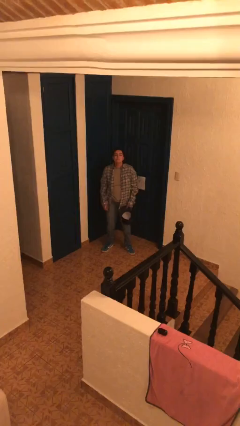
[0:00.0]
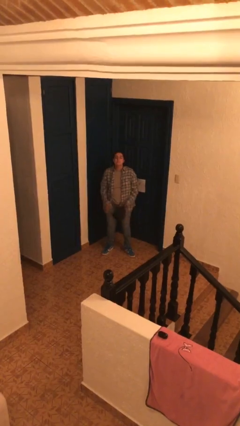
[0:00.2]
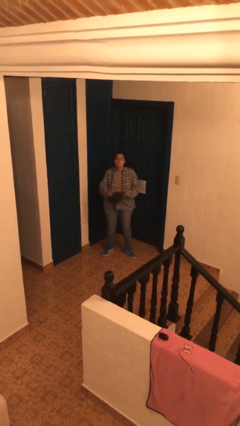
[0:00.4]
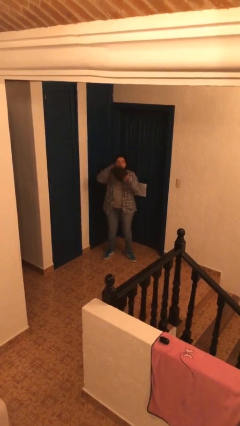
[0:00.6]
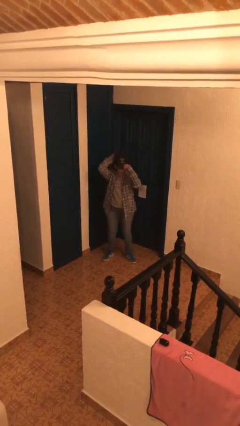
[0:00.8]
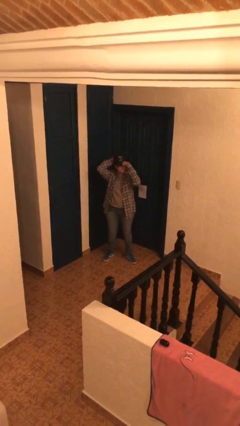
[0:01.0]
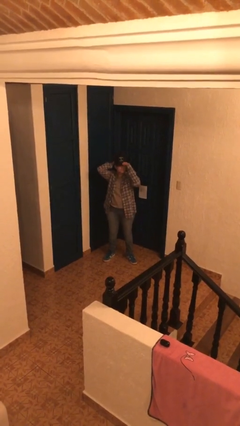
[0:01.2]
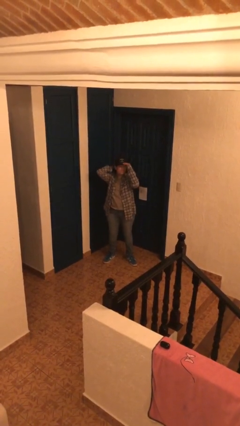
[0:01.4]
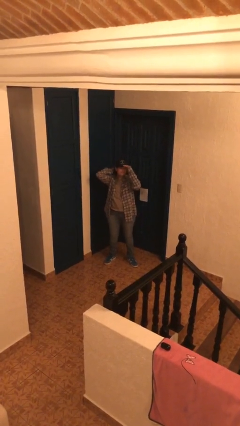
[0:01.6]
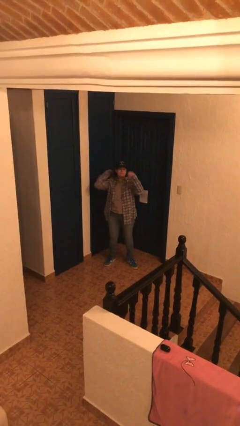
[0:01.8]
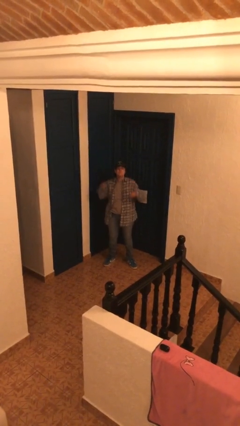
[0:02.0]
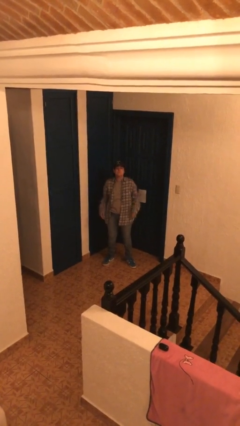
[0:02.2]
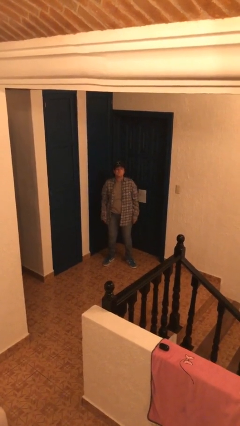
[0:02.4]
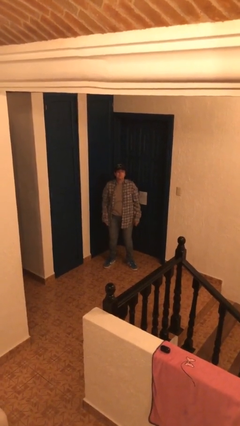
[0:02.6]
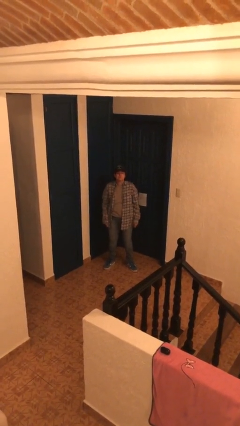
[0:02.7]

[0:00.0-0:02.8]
person puts on hat

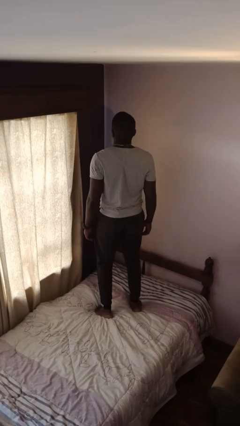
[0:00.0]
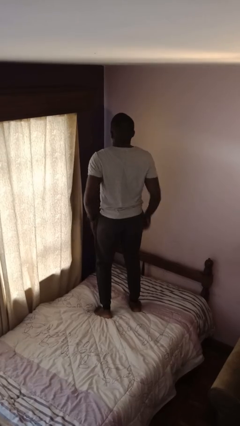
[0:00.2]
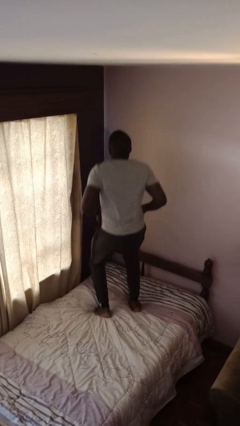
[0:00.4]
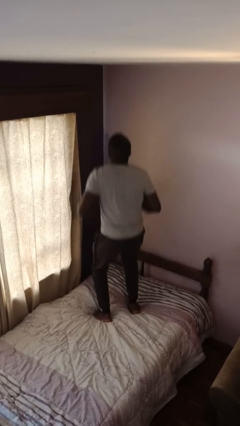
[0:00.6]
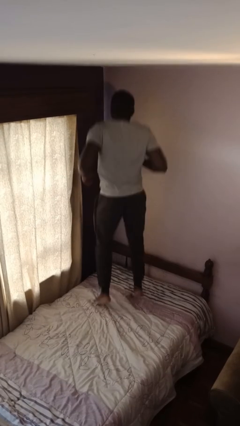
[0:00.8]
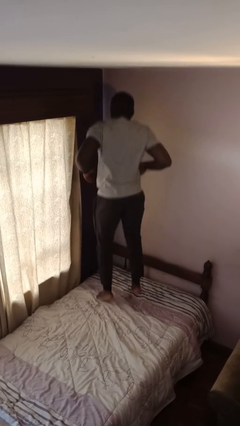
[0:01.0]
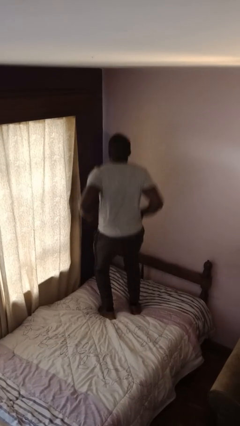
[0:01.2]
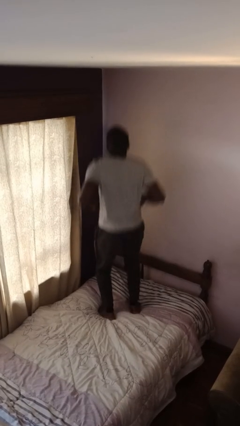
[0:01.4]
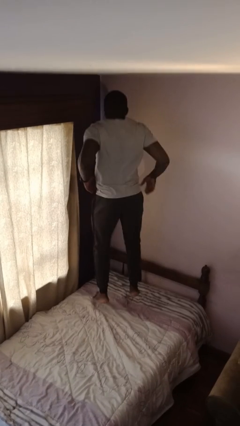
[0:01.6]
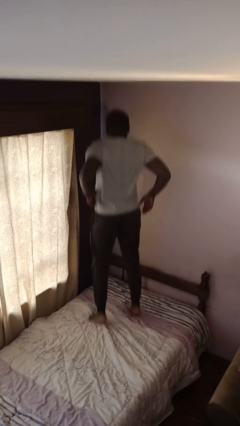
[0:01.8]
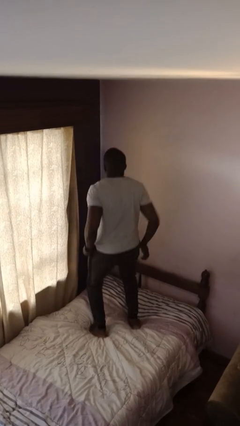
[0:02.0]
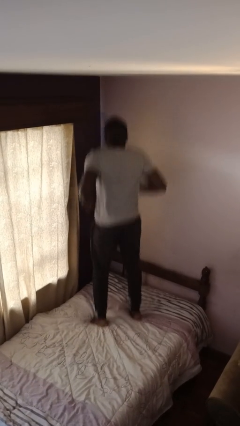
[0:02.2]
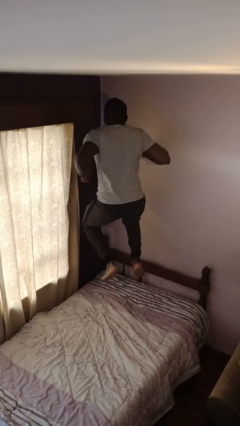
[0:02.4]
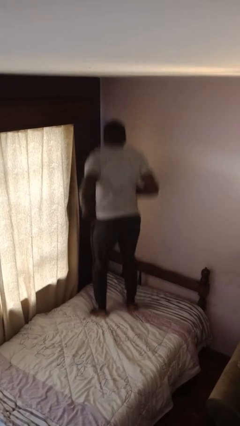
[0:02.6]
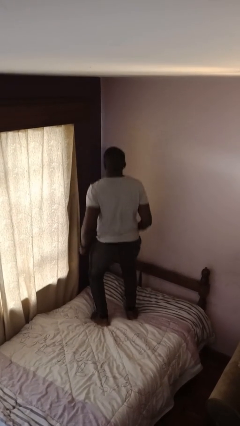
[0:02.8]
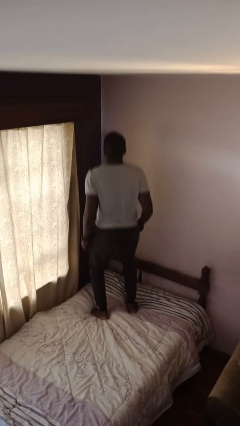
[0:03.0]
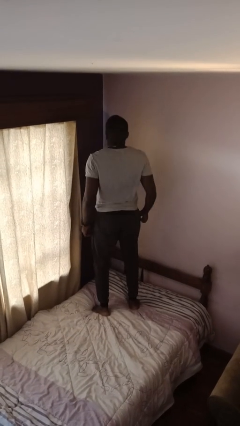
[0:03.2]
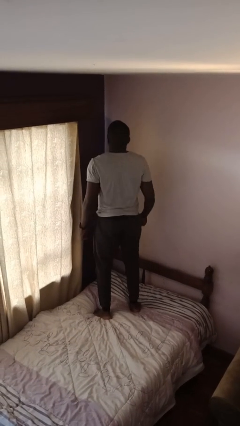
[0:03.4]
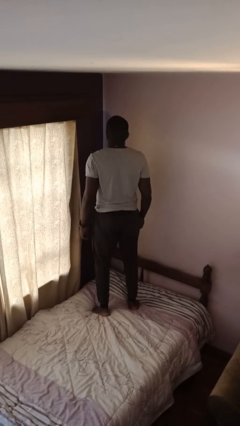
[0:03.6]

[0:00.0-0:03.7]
person jumps on bed

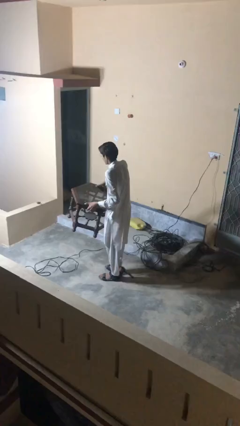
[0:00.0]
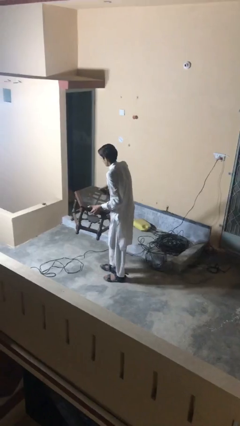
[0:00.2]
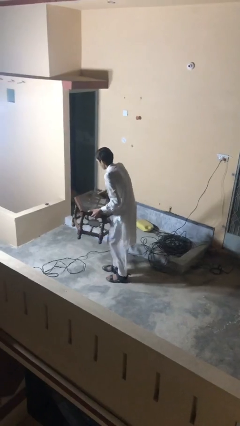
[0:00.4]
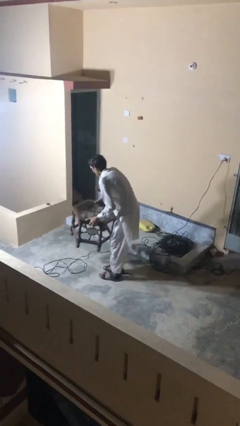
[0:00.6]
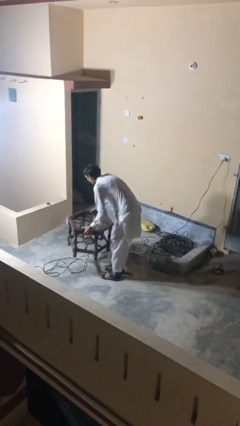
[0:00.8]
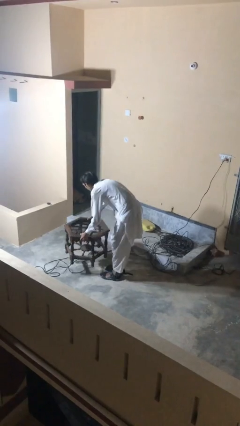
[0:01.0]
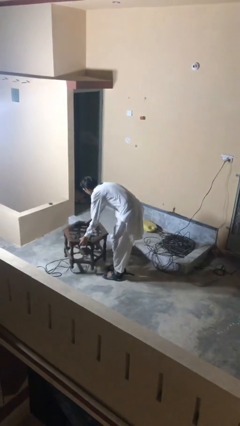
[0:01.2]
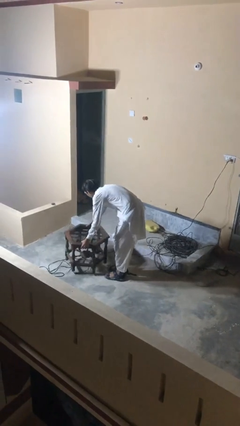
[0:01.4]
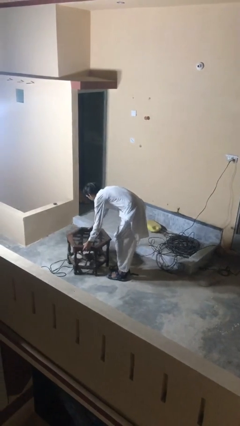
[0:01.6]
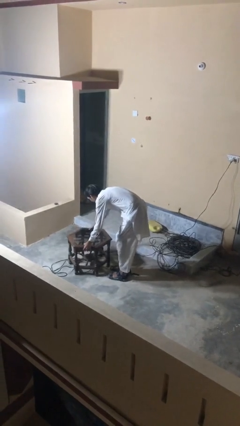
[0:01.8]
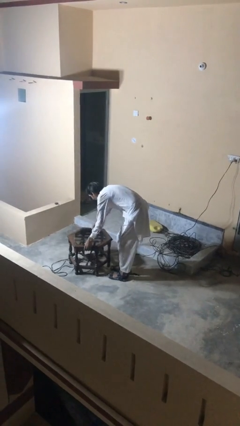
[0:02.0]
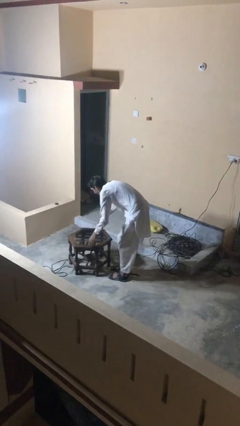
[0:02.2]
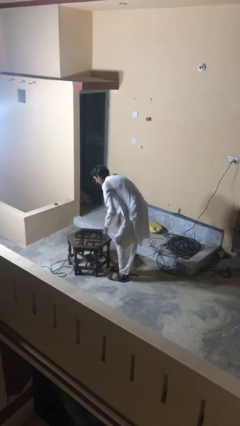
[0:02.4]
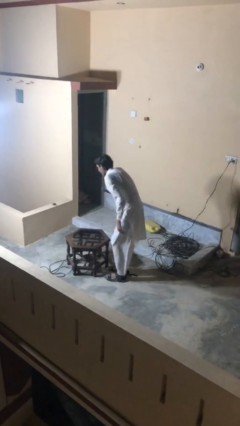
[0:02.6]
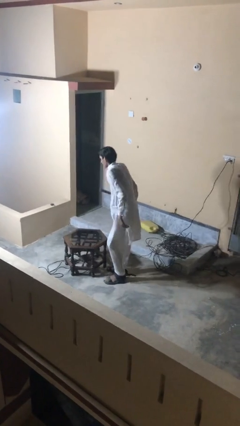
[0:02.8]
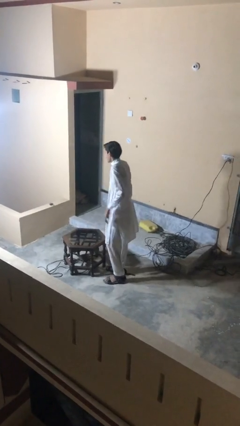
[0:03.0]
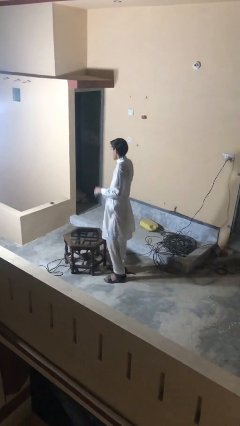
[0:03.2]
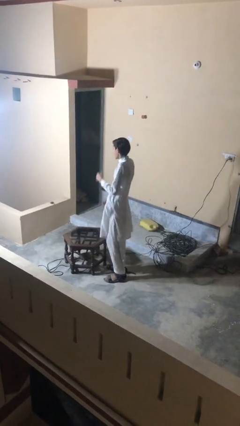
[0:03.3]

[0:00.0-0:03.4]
person puts down object on floor

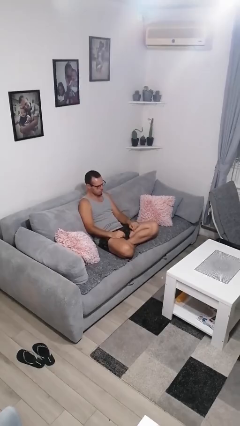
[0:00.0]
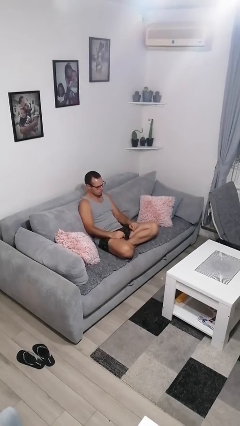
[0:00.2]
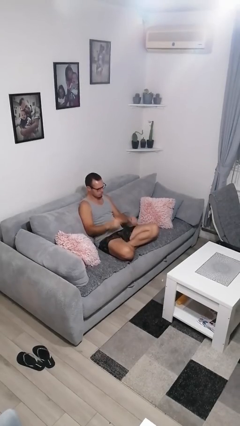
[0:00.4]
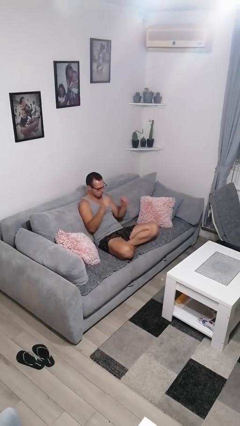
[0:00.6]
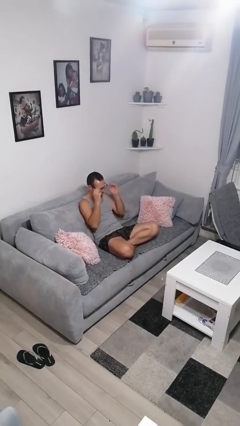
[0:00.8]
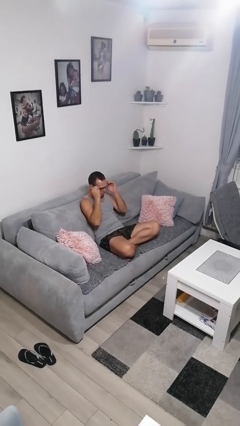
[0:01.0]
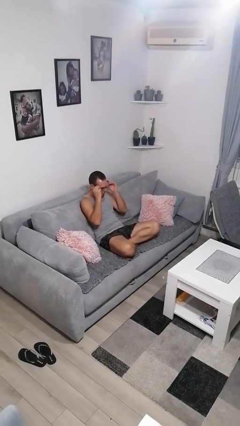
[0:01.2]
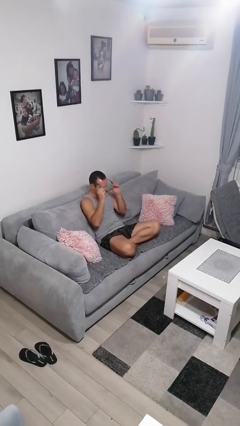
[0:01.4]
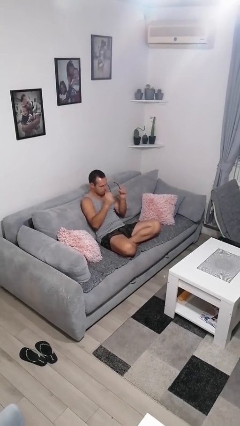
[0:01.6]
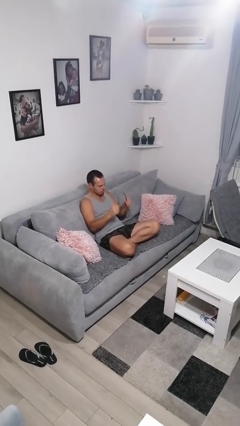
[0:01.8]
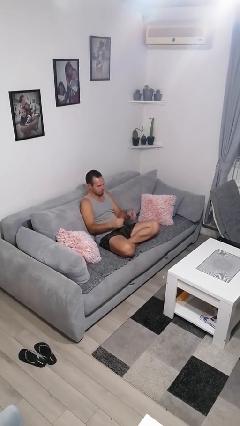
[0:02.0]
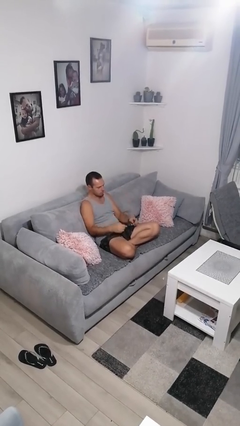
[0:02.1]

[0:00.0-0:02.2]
person takes off glasses

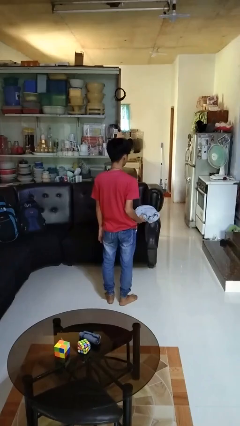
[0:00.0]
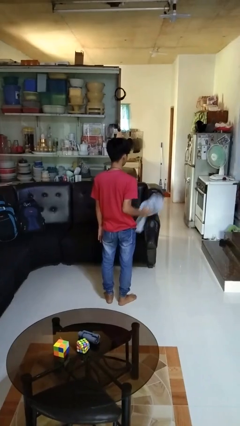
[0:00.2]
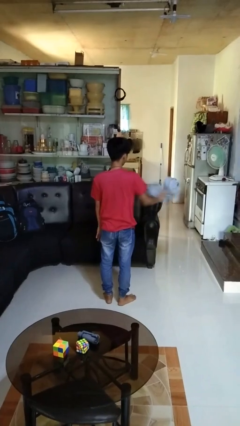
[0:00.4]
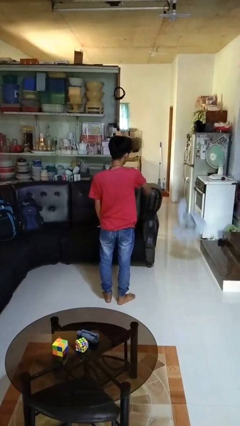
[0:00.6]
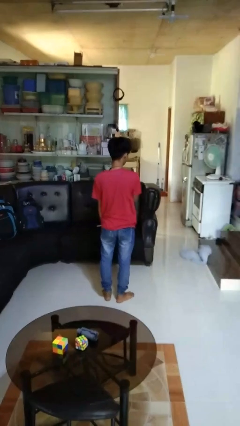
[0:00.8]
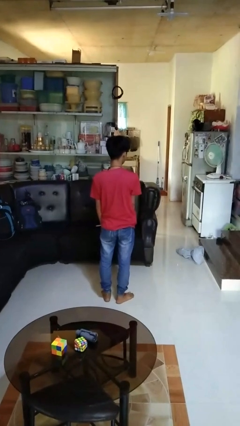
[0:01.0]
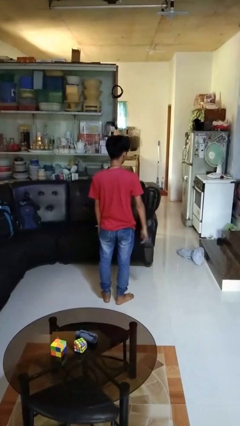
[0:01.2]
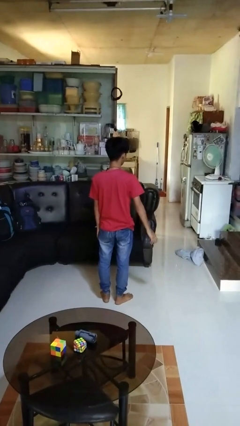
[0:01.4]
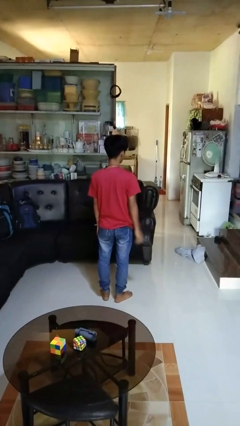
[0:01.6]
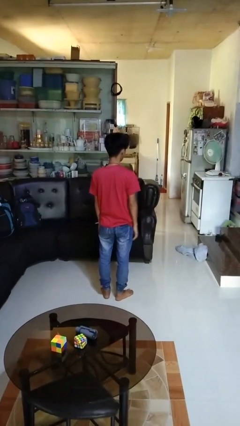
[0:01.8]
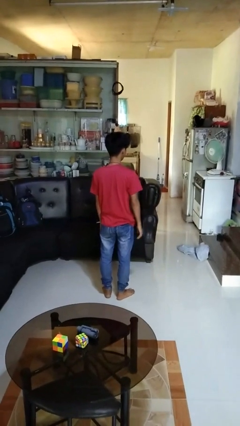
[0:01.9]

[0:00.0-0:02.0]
person throws object into air

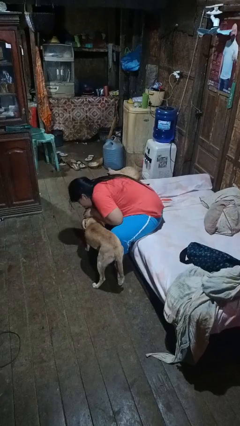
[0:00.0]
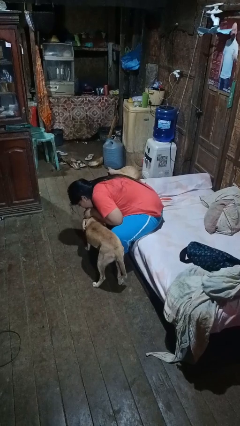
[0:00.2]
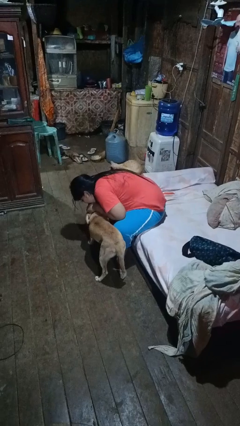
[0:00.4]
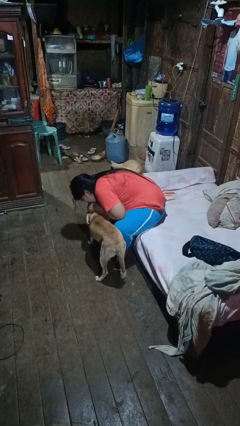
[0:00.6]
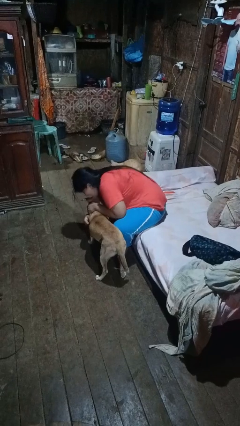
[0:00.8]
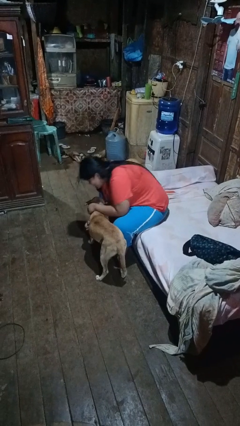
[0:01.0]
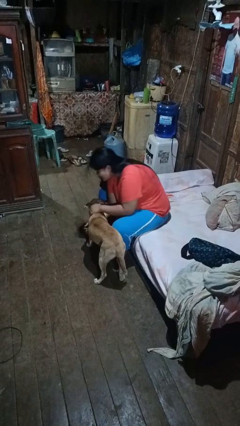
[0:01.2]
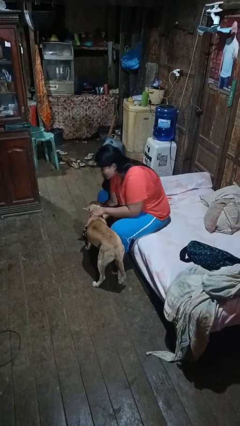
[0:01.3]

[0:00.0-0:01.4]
person hugs dog

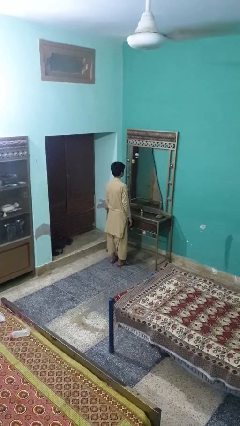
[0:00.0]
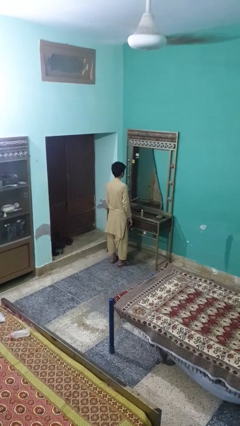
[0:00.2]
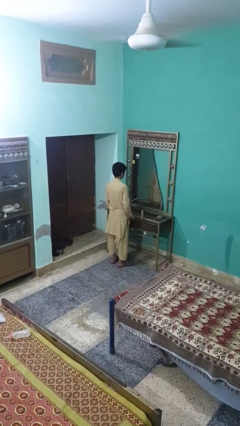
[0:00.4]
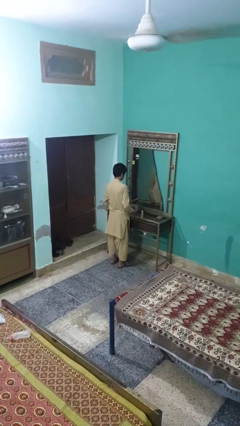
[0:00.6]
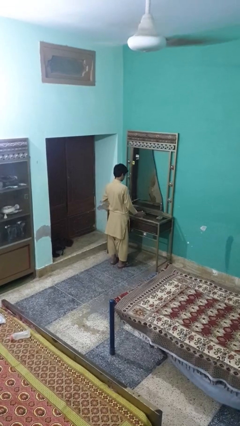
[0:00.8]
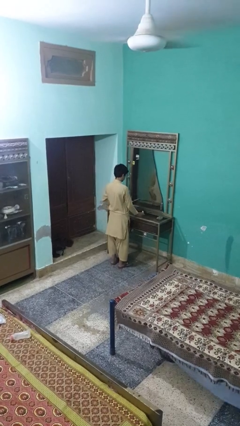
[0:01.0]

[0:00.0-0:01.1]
person applies foundation makeup

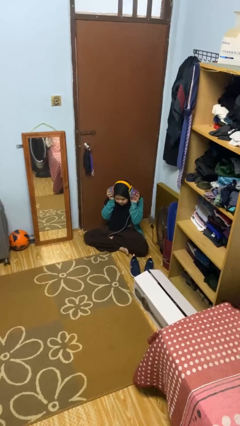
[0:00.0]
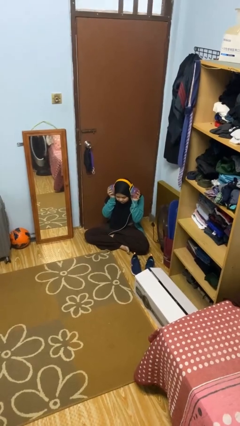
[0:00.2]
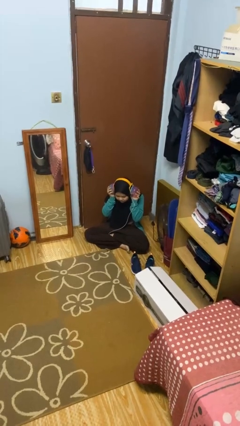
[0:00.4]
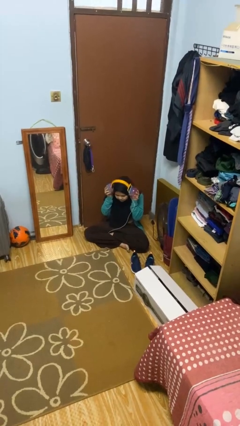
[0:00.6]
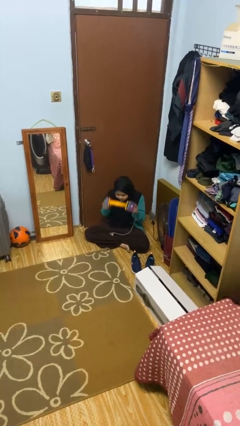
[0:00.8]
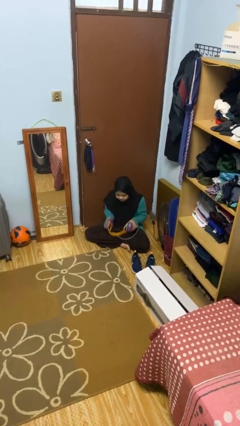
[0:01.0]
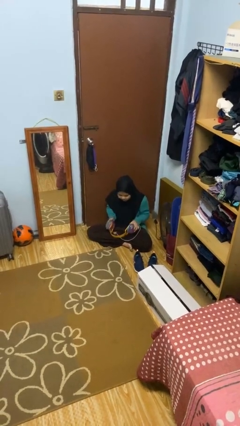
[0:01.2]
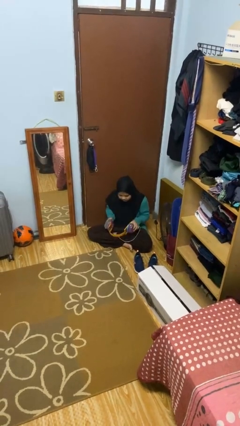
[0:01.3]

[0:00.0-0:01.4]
person takes off headphones
